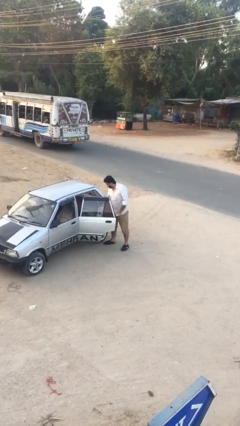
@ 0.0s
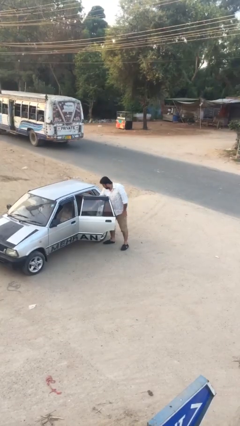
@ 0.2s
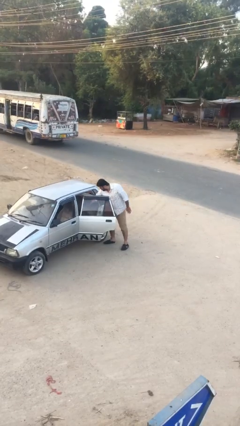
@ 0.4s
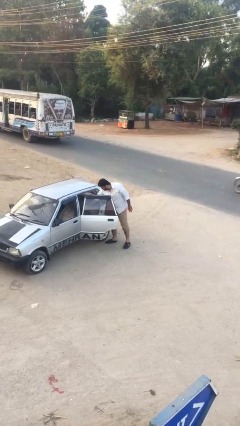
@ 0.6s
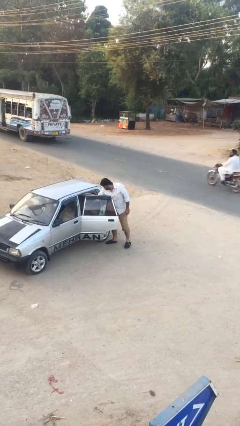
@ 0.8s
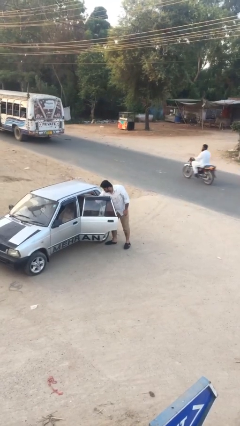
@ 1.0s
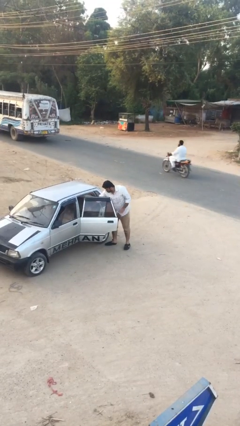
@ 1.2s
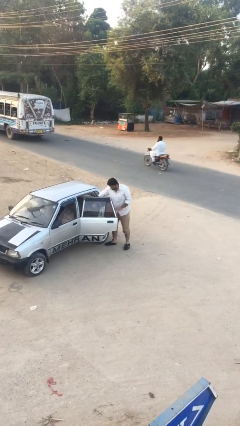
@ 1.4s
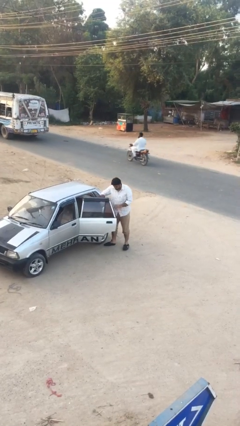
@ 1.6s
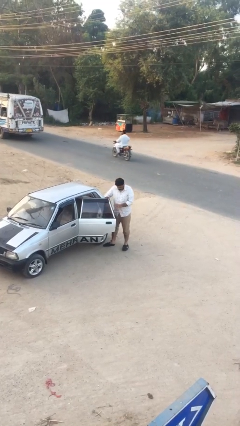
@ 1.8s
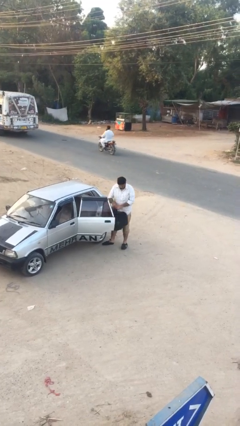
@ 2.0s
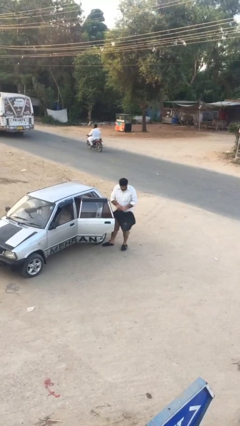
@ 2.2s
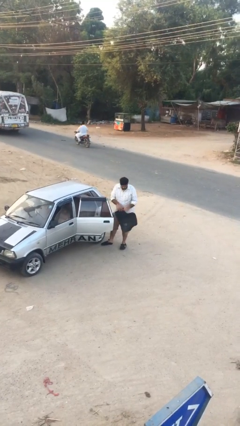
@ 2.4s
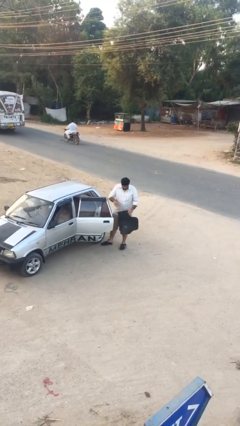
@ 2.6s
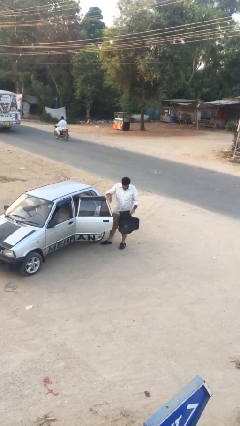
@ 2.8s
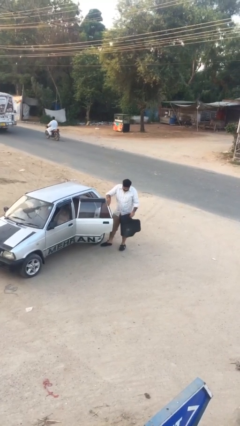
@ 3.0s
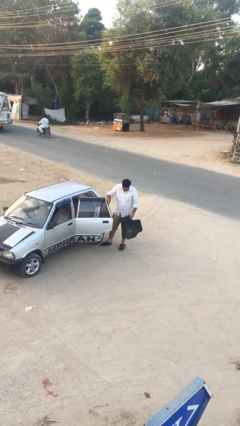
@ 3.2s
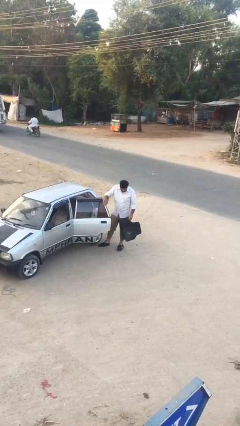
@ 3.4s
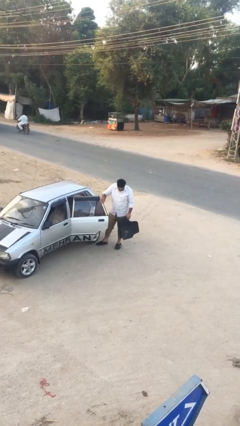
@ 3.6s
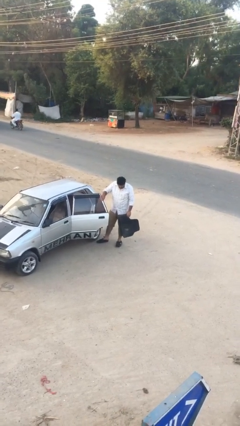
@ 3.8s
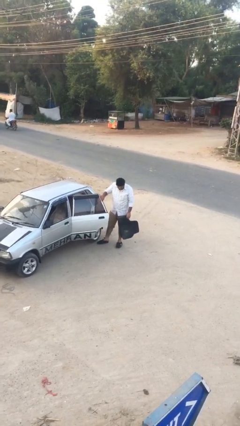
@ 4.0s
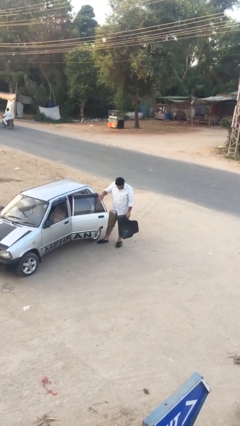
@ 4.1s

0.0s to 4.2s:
person unloads car

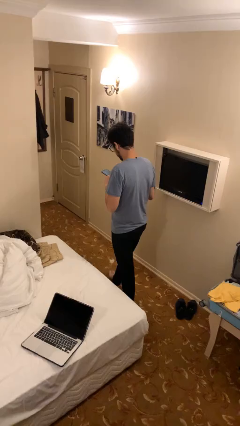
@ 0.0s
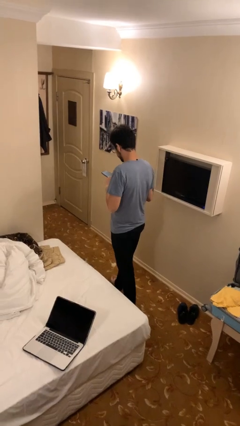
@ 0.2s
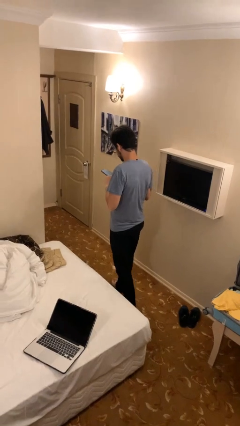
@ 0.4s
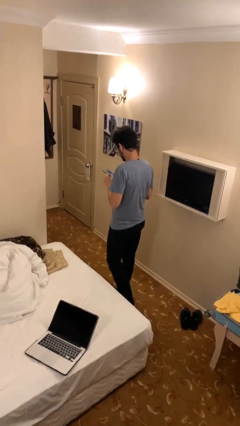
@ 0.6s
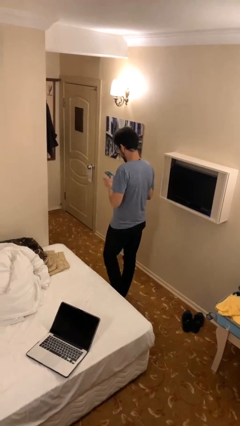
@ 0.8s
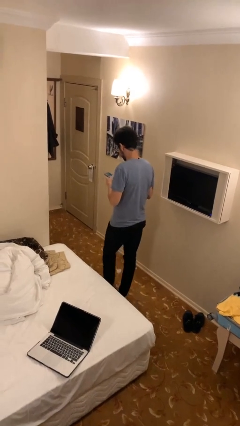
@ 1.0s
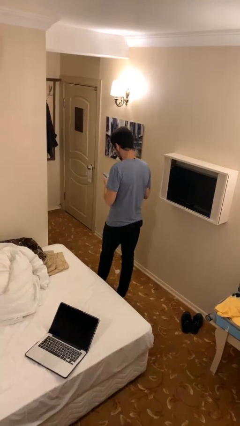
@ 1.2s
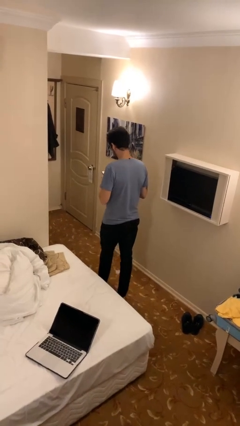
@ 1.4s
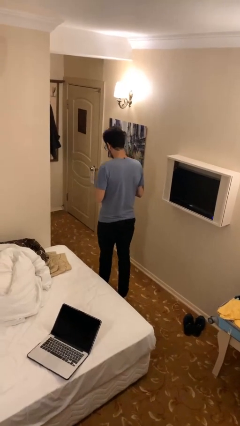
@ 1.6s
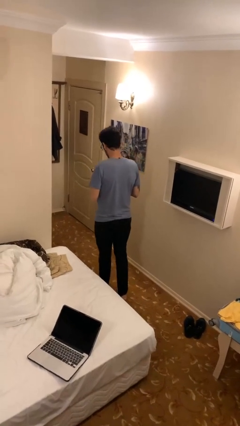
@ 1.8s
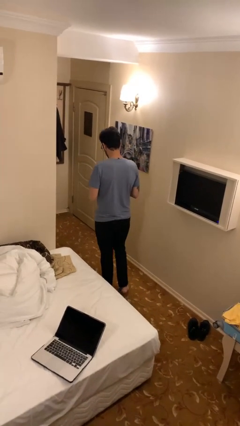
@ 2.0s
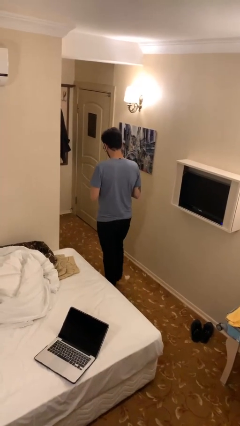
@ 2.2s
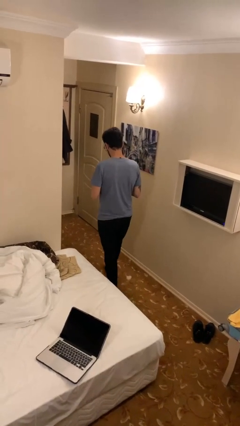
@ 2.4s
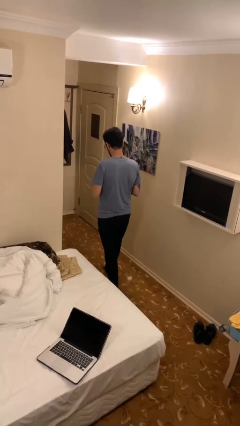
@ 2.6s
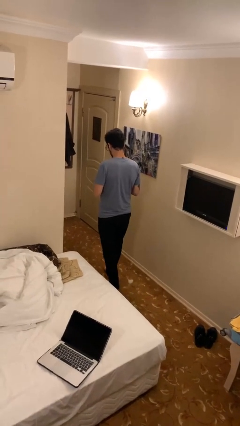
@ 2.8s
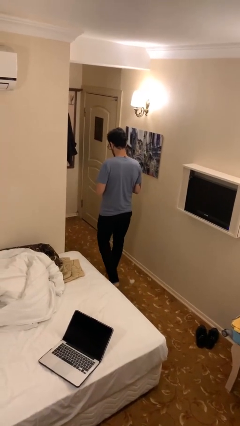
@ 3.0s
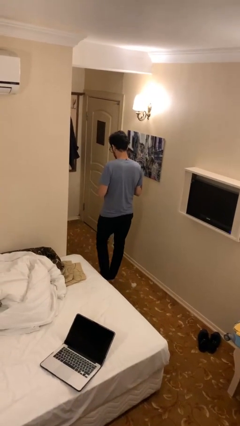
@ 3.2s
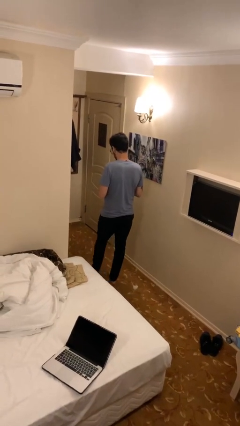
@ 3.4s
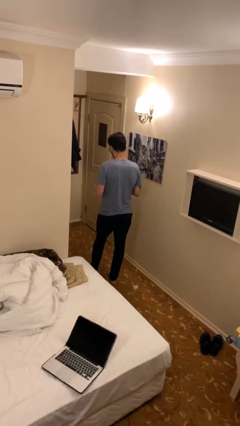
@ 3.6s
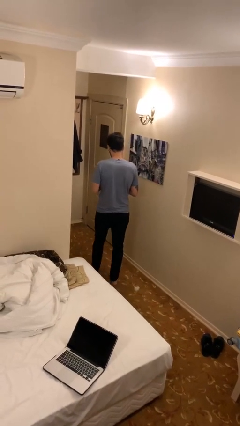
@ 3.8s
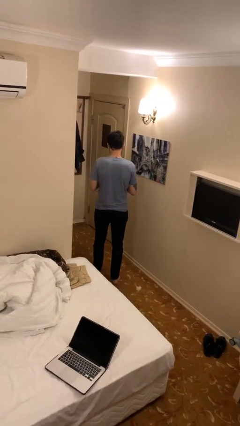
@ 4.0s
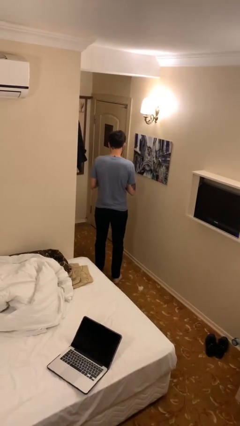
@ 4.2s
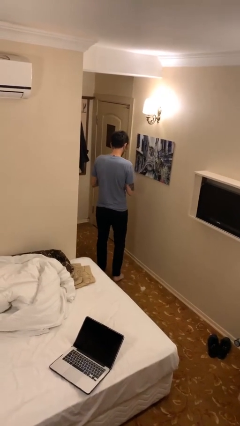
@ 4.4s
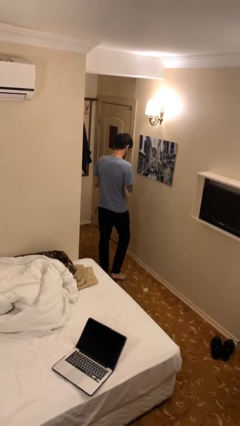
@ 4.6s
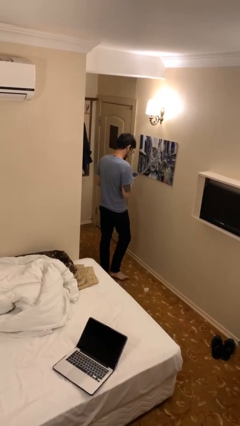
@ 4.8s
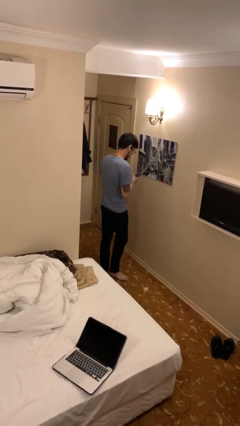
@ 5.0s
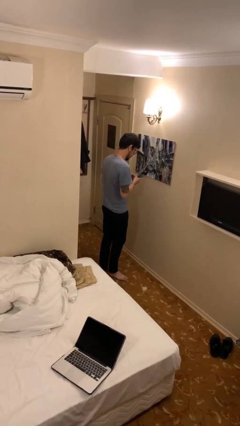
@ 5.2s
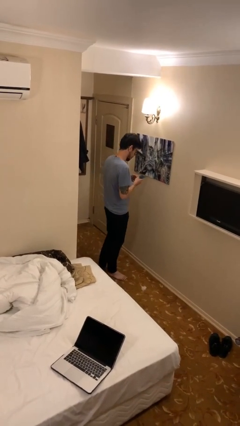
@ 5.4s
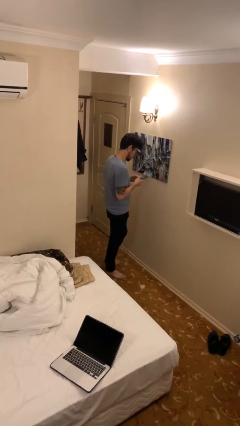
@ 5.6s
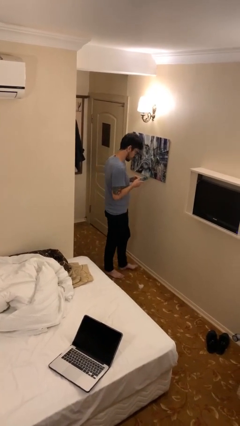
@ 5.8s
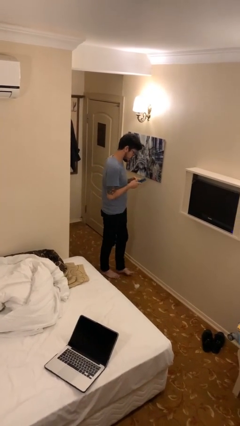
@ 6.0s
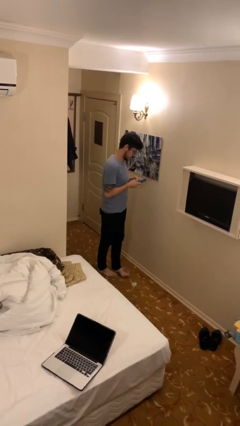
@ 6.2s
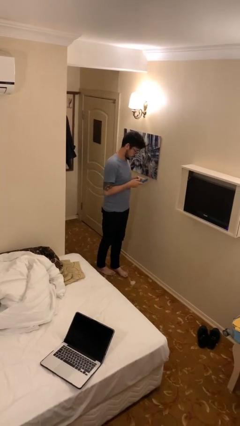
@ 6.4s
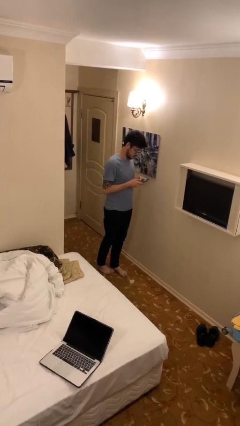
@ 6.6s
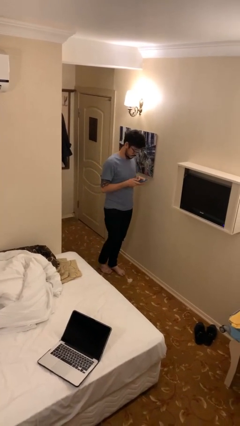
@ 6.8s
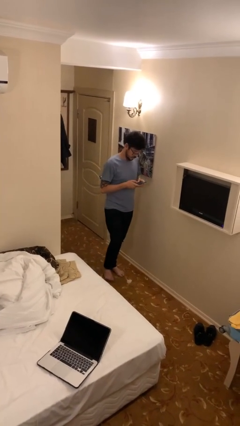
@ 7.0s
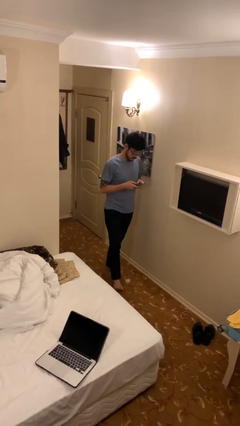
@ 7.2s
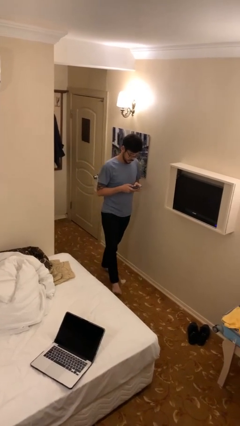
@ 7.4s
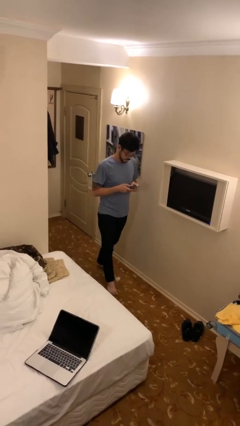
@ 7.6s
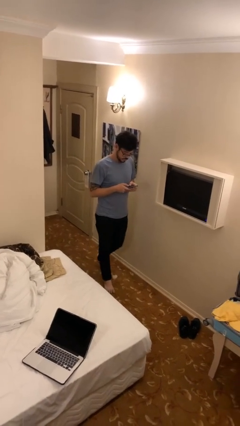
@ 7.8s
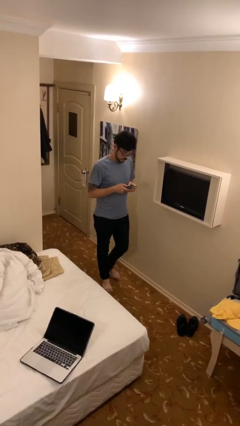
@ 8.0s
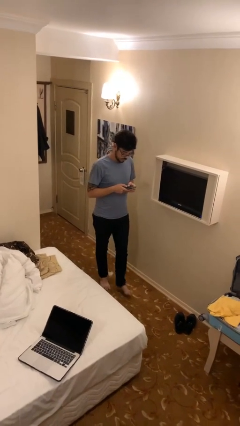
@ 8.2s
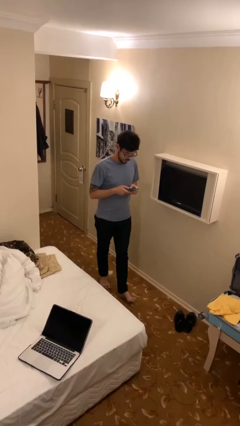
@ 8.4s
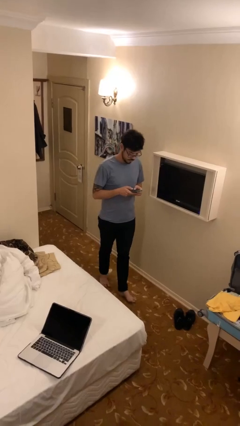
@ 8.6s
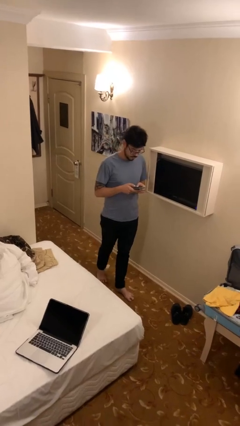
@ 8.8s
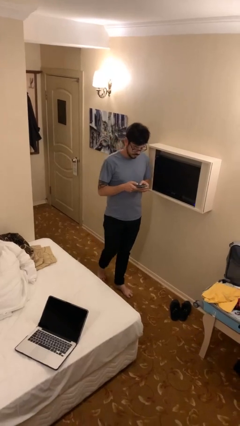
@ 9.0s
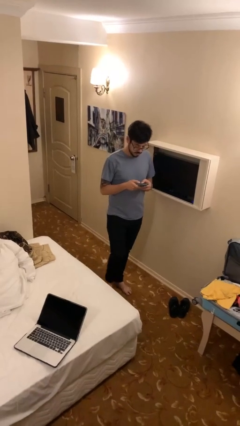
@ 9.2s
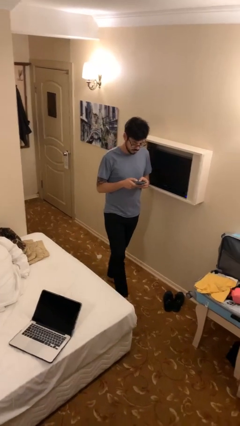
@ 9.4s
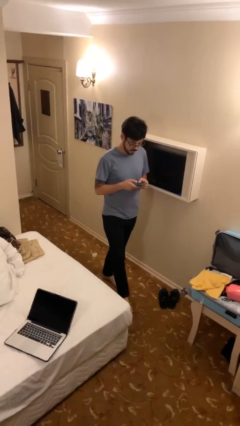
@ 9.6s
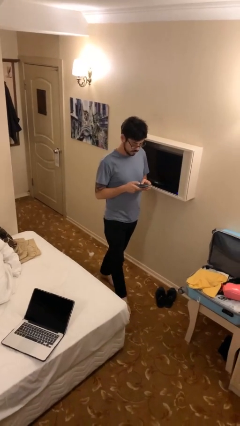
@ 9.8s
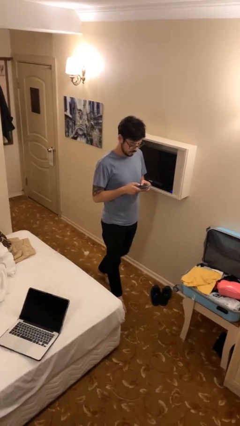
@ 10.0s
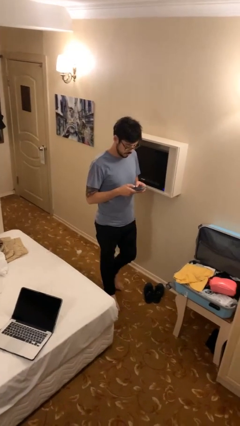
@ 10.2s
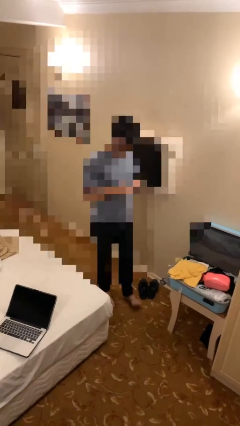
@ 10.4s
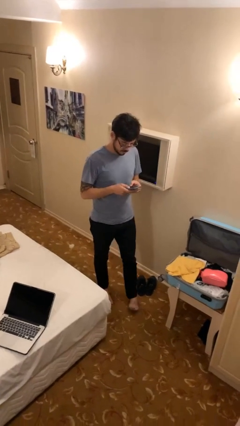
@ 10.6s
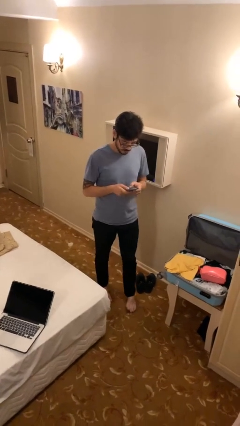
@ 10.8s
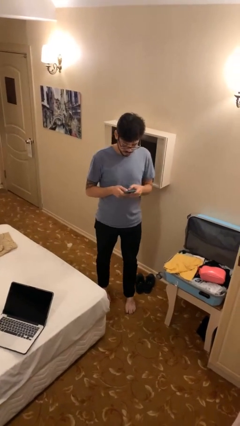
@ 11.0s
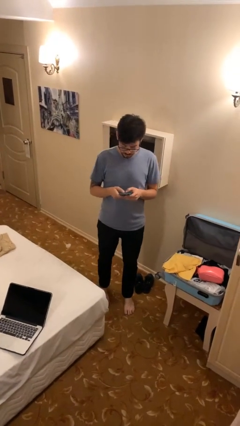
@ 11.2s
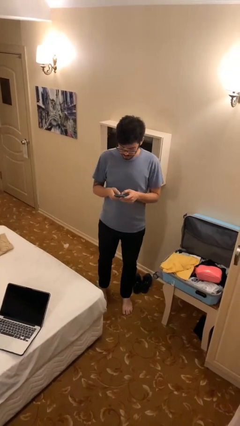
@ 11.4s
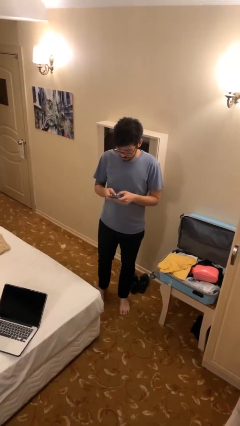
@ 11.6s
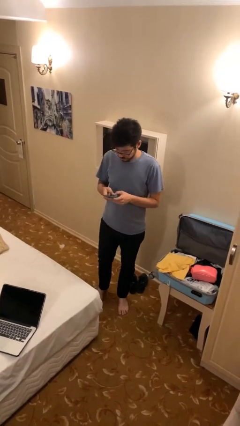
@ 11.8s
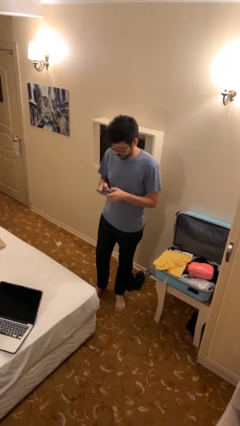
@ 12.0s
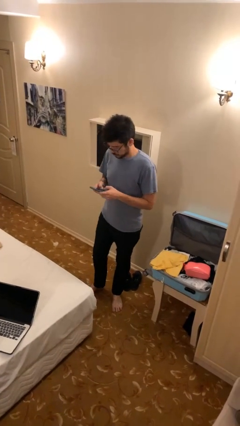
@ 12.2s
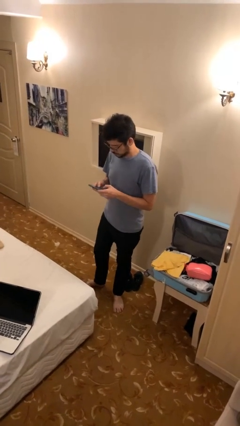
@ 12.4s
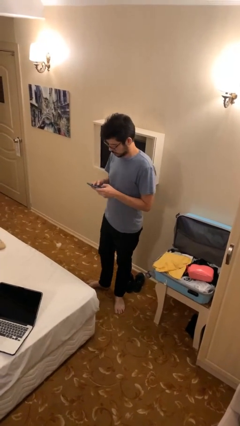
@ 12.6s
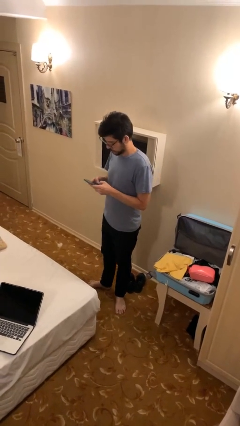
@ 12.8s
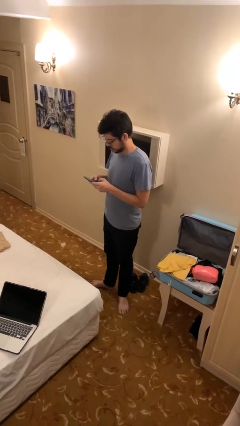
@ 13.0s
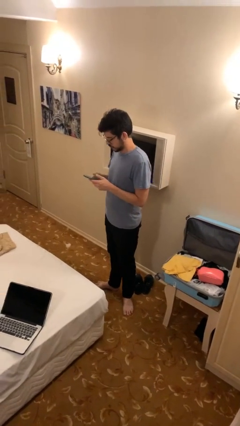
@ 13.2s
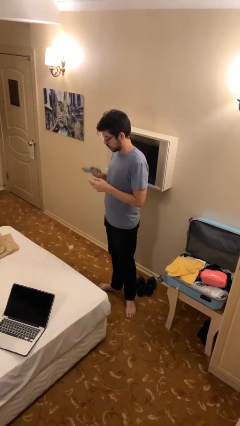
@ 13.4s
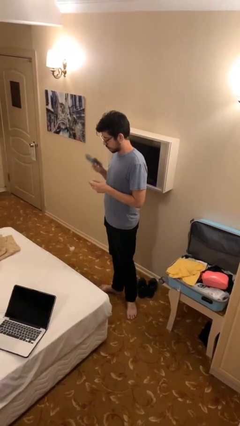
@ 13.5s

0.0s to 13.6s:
person texts on phone
